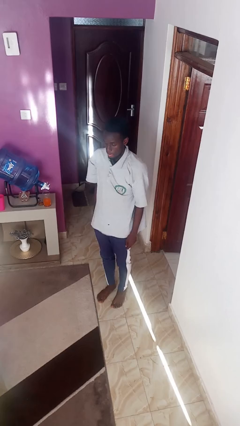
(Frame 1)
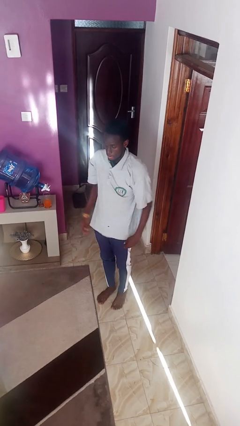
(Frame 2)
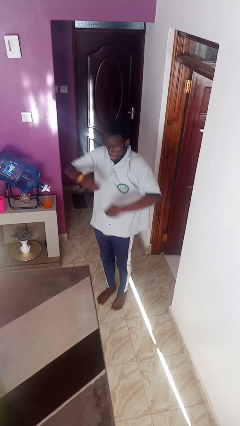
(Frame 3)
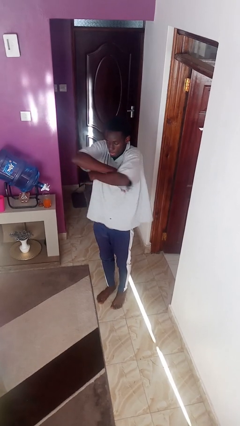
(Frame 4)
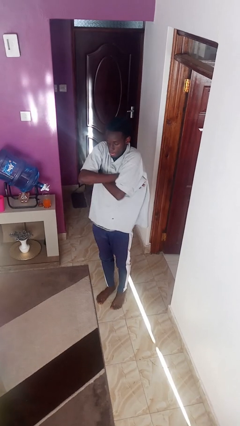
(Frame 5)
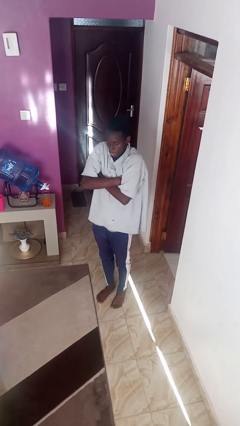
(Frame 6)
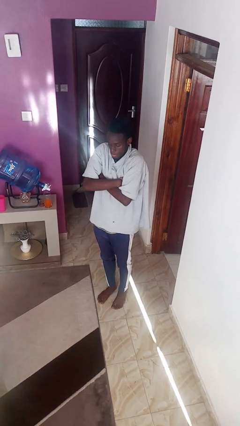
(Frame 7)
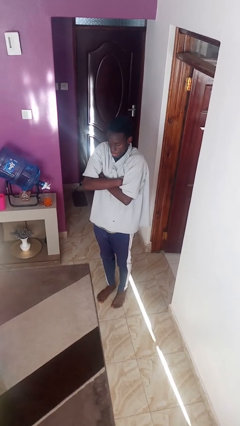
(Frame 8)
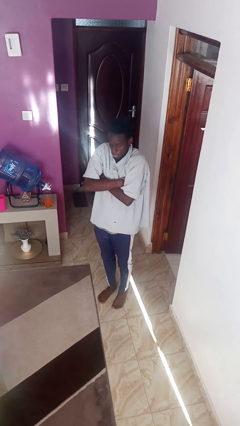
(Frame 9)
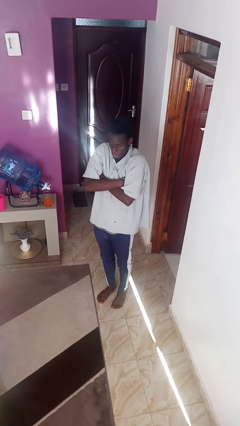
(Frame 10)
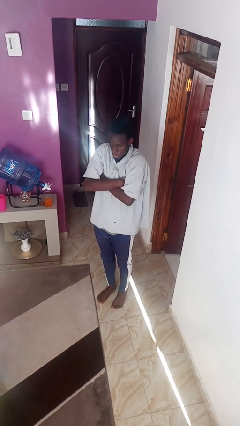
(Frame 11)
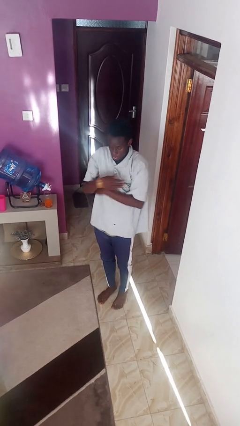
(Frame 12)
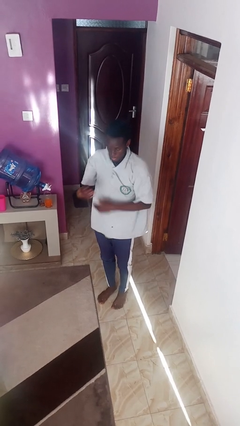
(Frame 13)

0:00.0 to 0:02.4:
person crosses arms

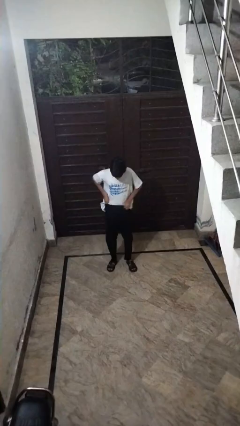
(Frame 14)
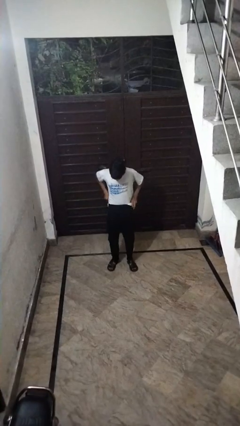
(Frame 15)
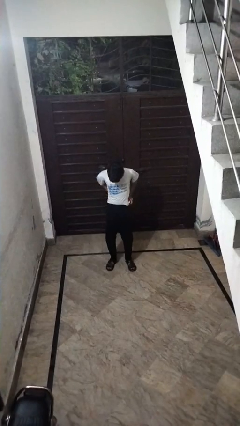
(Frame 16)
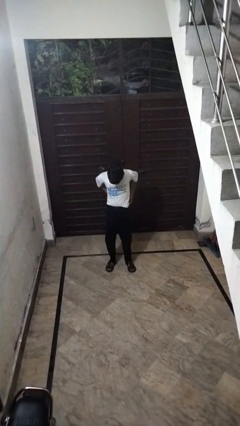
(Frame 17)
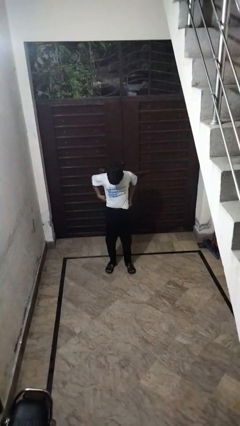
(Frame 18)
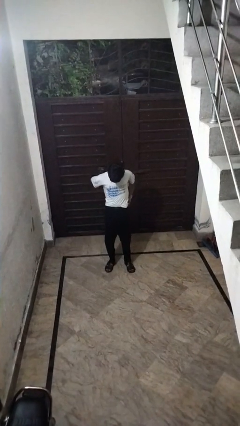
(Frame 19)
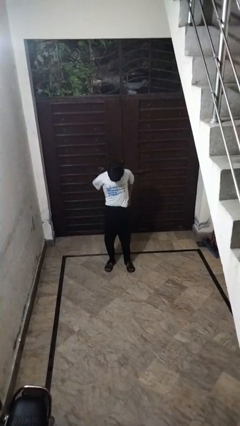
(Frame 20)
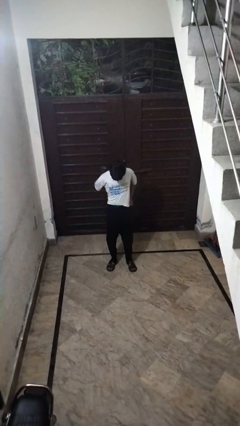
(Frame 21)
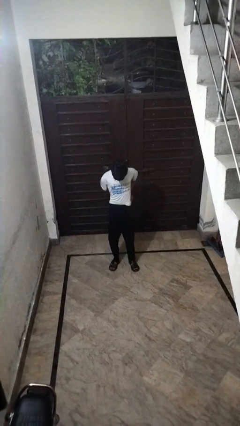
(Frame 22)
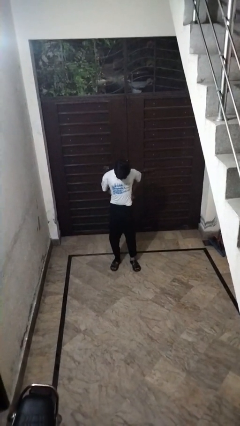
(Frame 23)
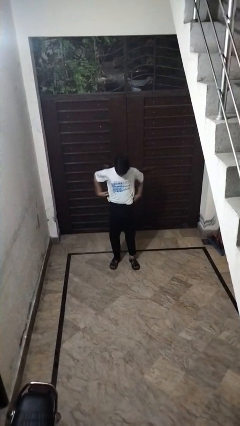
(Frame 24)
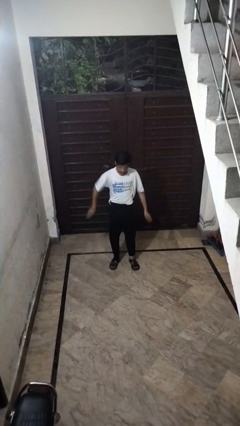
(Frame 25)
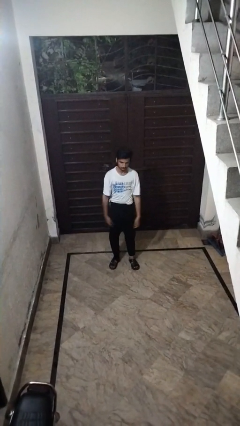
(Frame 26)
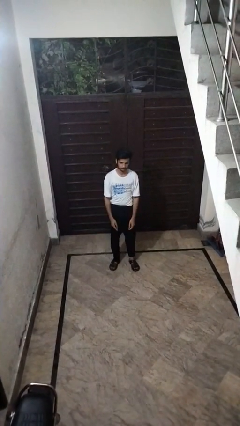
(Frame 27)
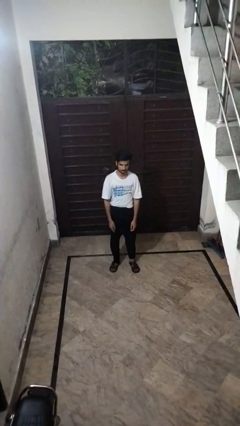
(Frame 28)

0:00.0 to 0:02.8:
person closes facility door

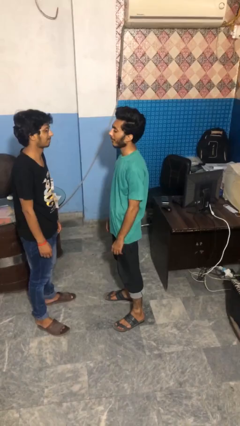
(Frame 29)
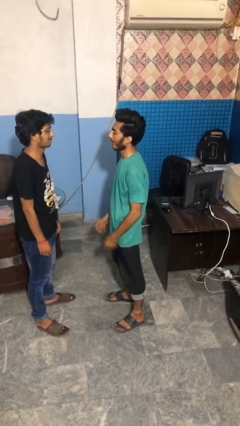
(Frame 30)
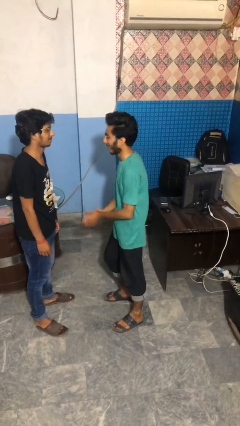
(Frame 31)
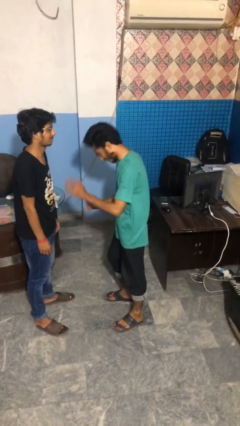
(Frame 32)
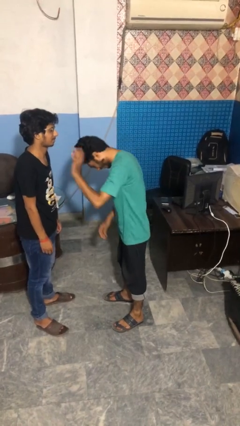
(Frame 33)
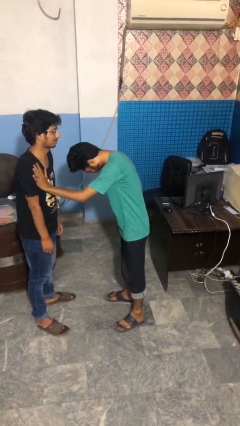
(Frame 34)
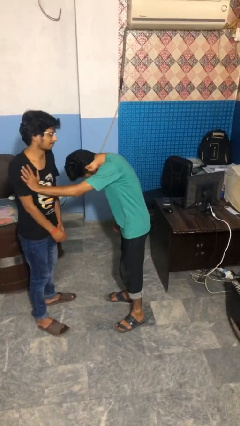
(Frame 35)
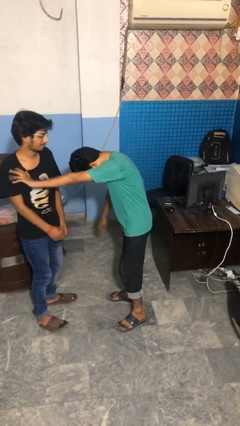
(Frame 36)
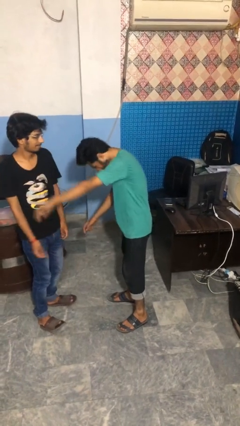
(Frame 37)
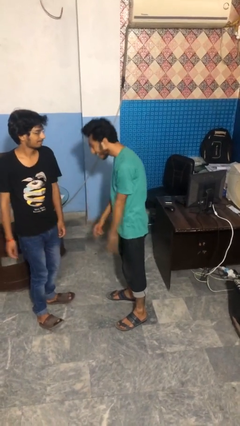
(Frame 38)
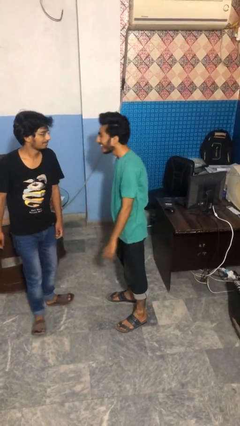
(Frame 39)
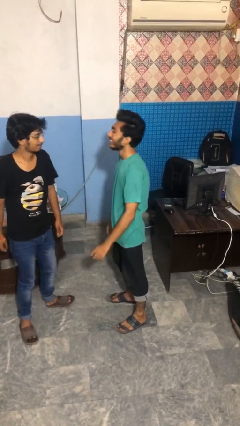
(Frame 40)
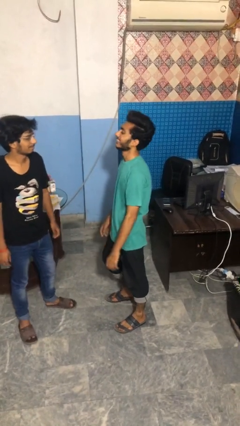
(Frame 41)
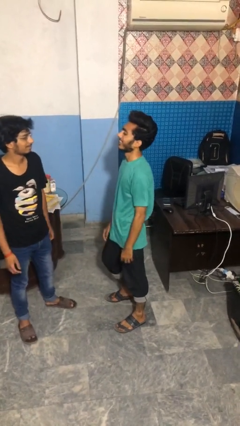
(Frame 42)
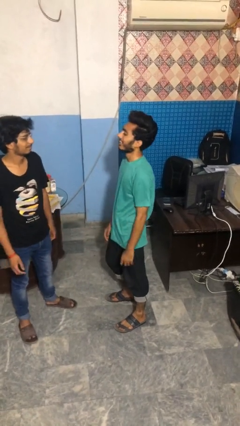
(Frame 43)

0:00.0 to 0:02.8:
person shoves person

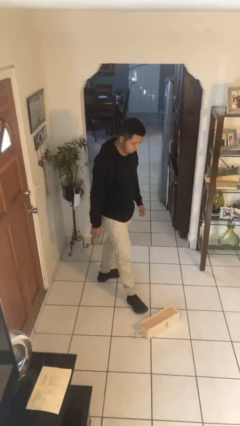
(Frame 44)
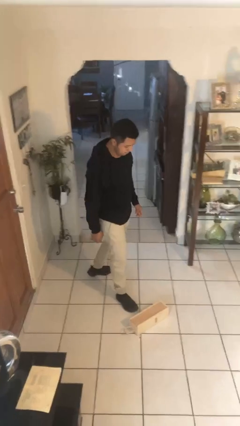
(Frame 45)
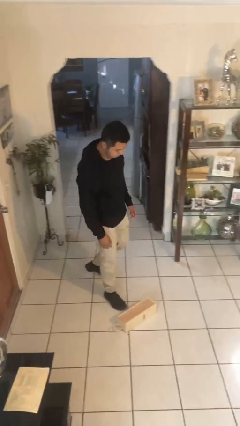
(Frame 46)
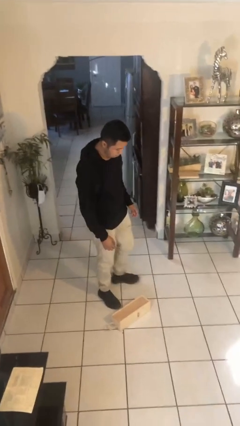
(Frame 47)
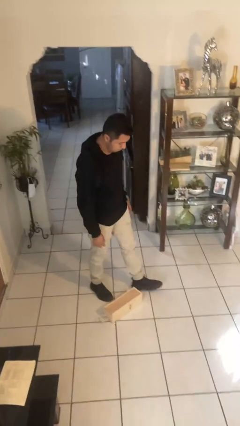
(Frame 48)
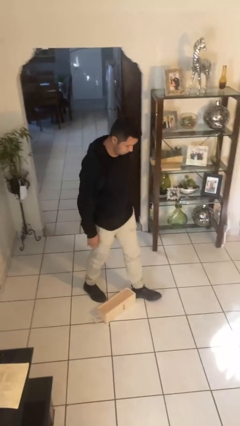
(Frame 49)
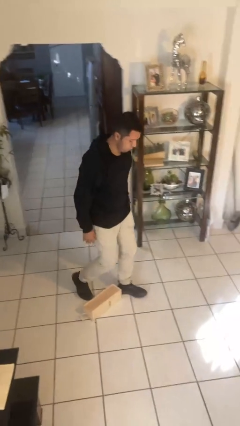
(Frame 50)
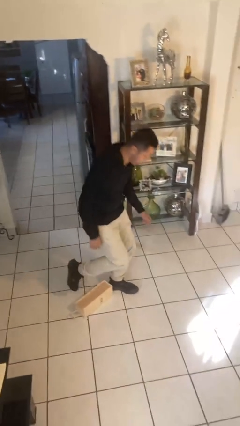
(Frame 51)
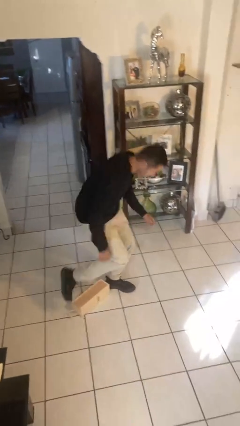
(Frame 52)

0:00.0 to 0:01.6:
person trips on object on floor

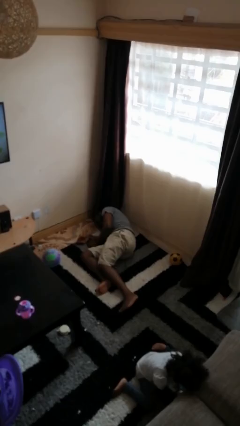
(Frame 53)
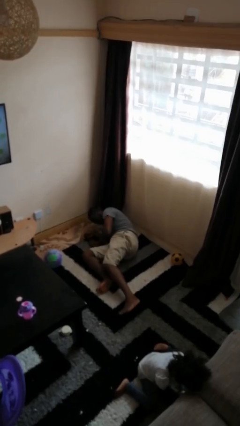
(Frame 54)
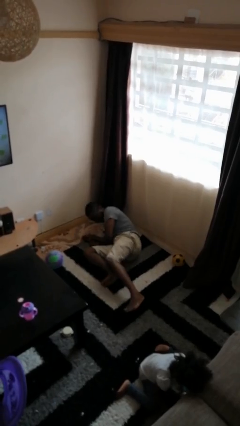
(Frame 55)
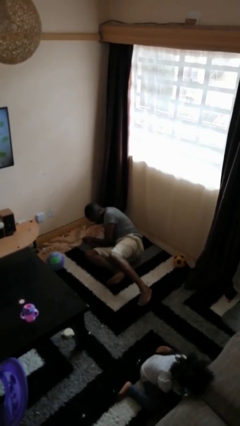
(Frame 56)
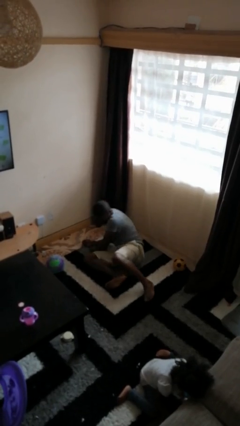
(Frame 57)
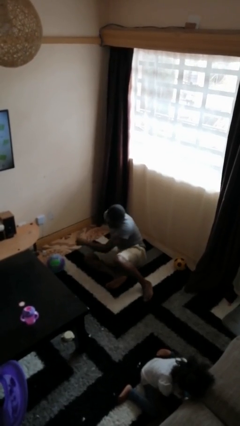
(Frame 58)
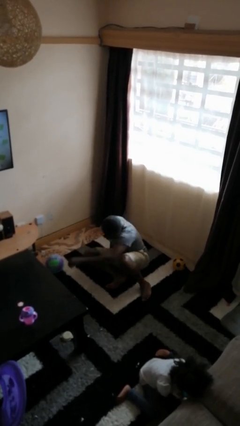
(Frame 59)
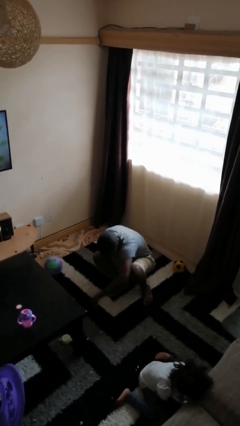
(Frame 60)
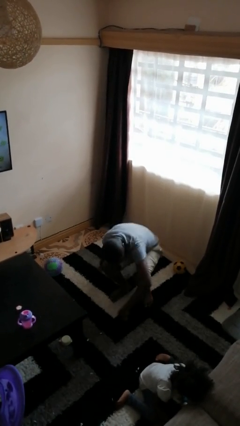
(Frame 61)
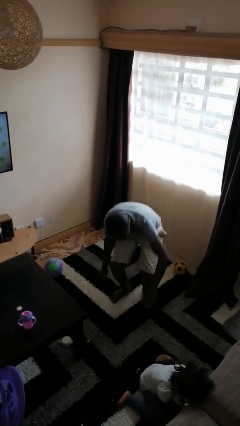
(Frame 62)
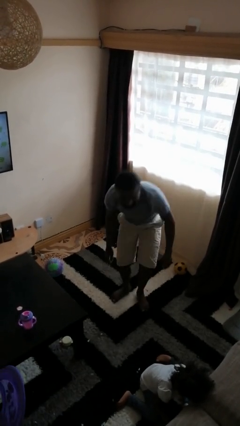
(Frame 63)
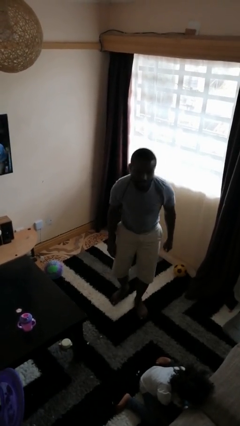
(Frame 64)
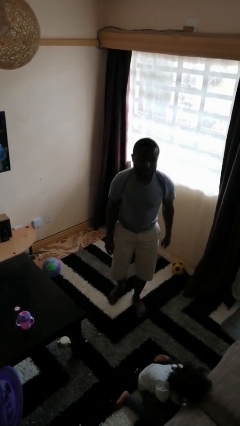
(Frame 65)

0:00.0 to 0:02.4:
person stands up from floor

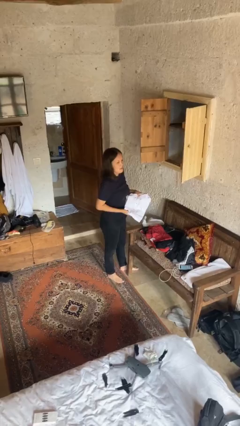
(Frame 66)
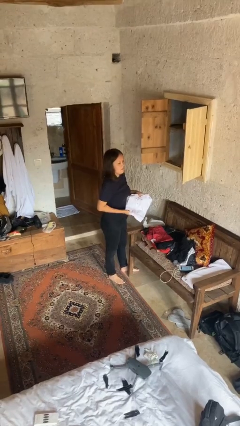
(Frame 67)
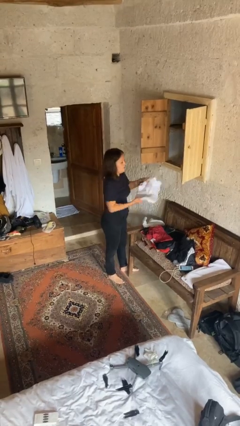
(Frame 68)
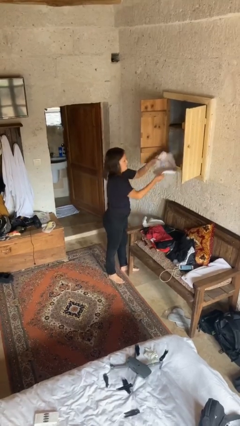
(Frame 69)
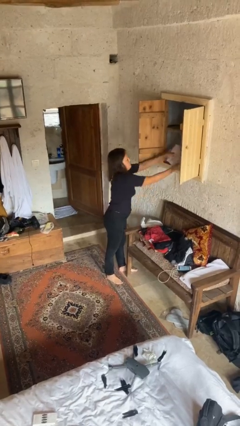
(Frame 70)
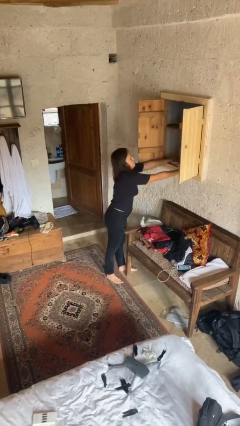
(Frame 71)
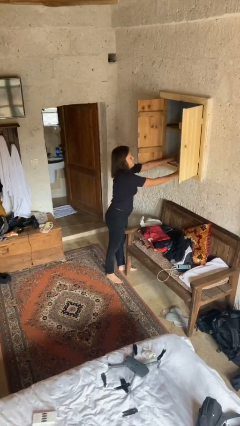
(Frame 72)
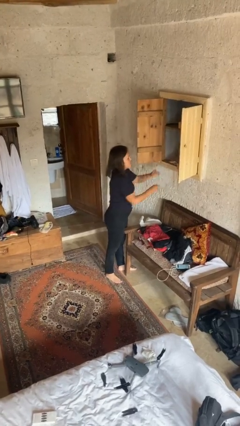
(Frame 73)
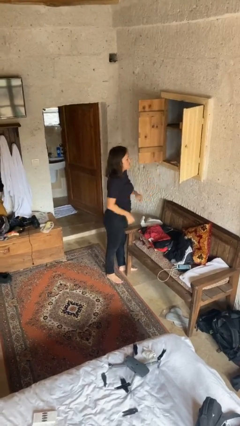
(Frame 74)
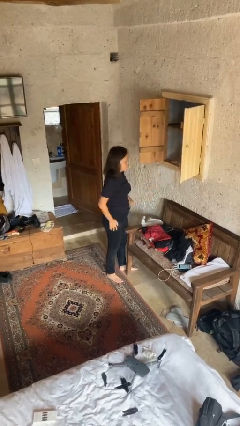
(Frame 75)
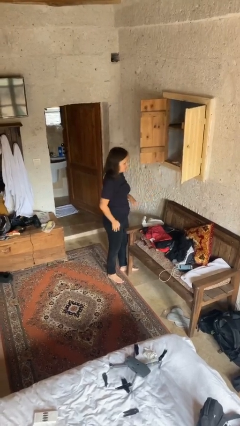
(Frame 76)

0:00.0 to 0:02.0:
person puts clothes into dresser

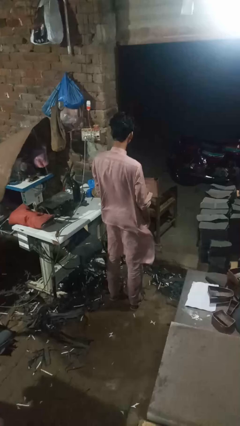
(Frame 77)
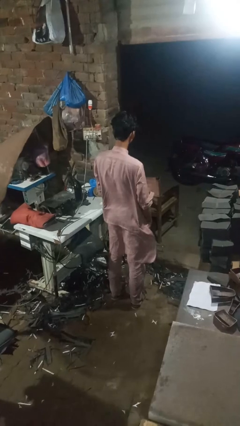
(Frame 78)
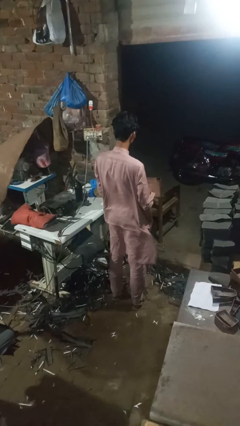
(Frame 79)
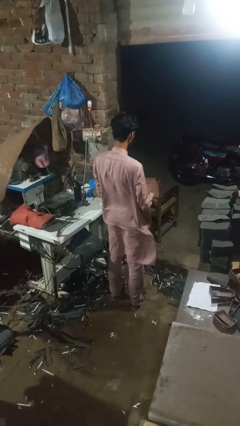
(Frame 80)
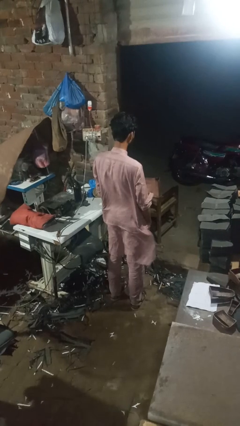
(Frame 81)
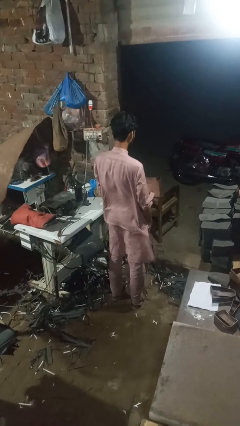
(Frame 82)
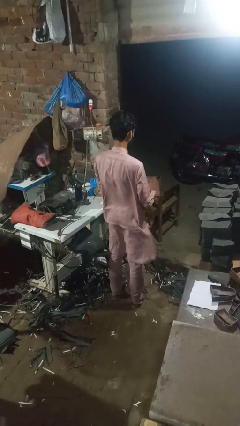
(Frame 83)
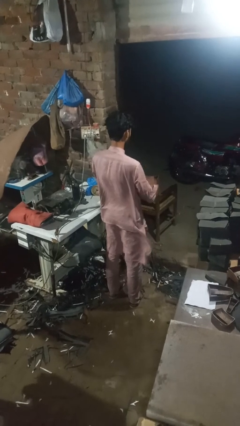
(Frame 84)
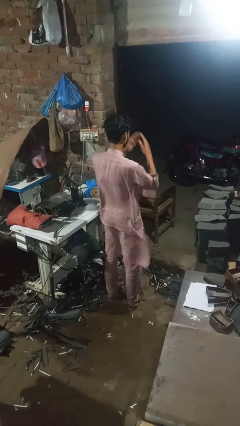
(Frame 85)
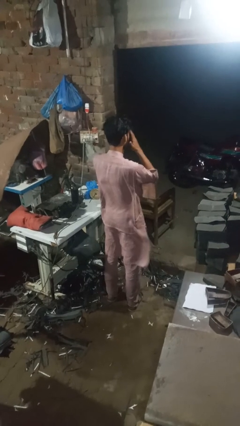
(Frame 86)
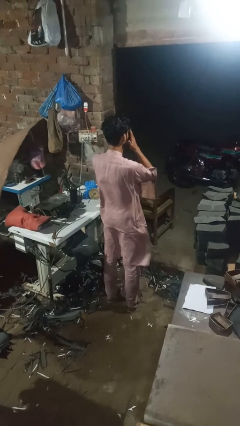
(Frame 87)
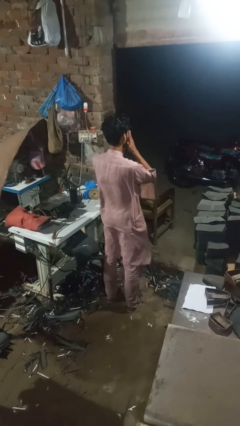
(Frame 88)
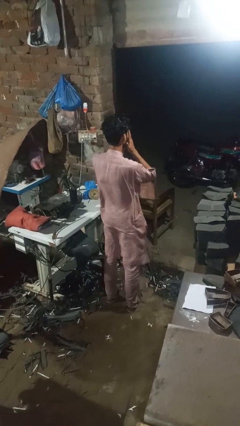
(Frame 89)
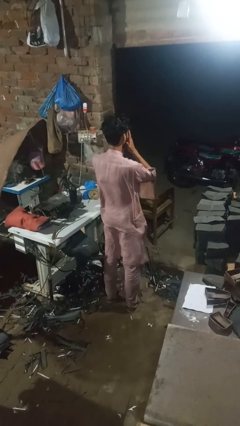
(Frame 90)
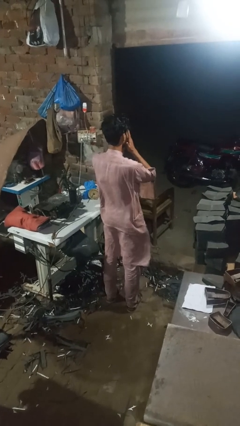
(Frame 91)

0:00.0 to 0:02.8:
person sneezes into hand

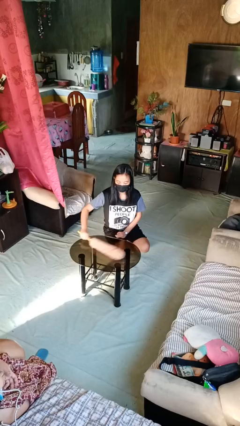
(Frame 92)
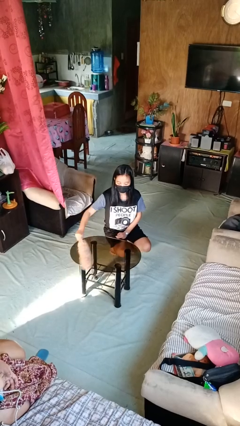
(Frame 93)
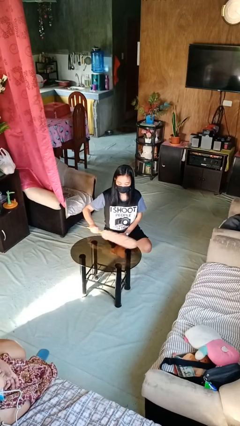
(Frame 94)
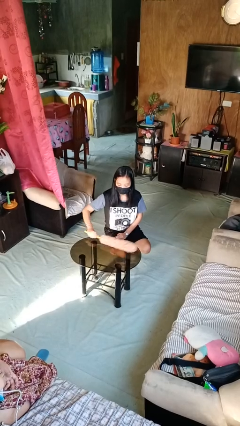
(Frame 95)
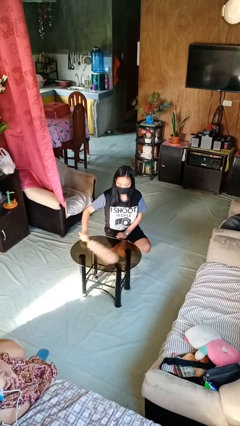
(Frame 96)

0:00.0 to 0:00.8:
person dusts furniture
